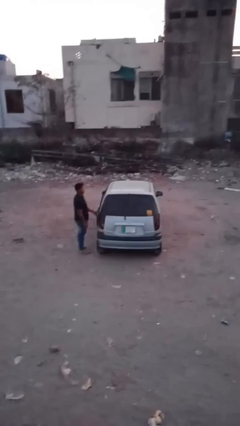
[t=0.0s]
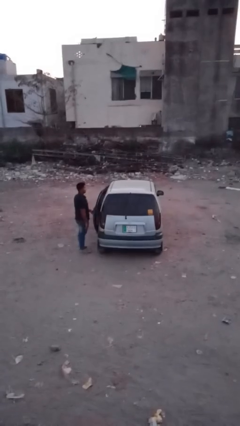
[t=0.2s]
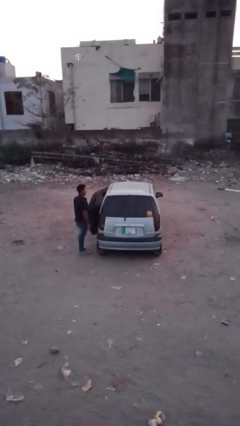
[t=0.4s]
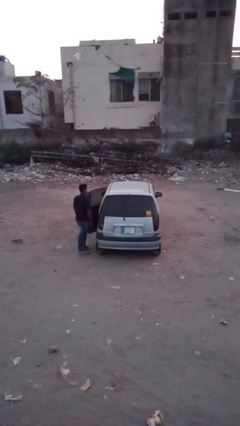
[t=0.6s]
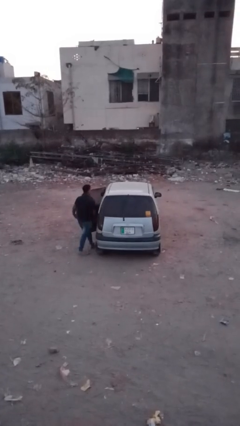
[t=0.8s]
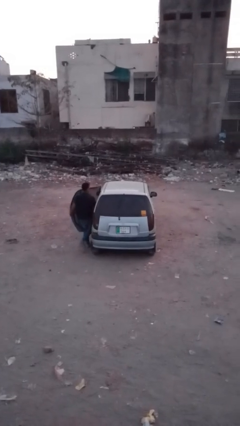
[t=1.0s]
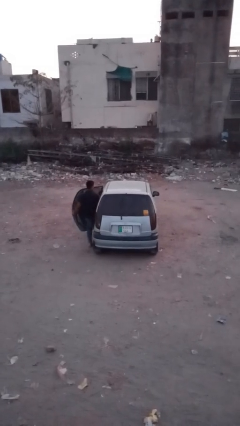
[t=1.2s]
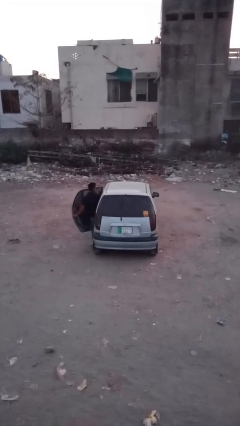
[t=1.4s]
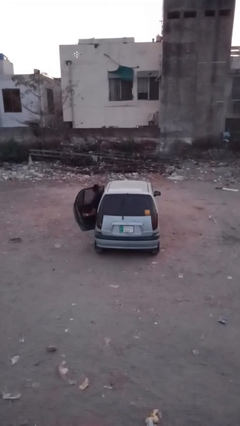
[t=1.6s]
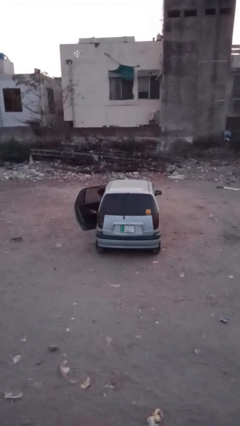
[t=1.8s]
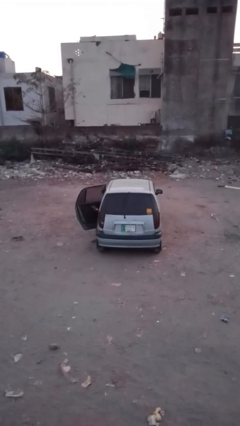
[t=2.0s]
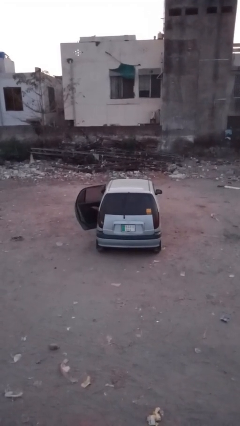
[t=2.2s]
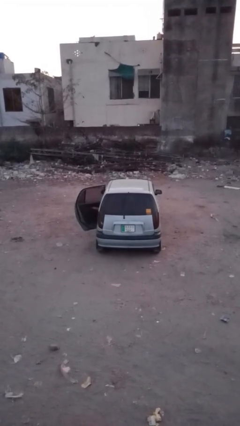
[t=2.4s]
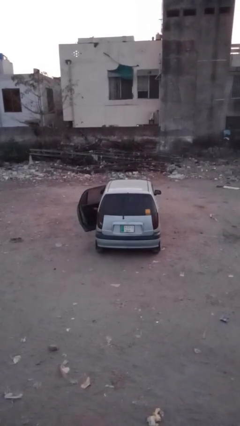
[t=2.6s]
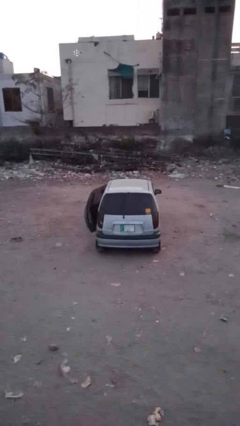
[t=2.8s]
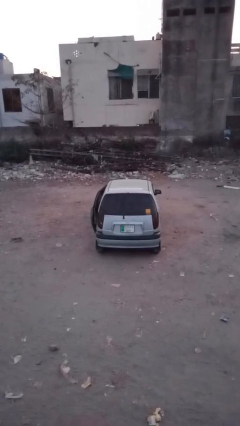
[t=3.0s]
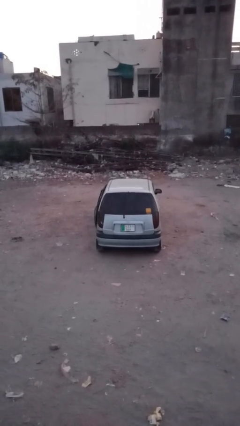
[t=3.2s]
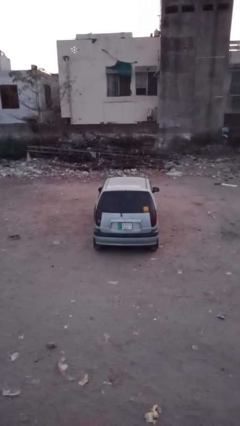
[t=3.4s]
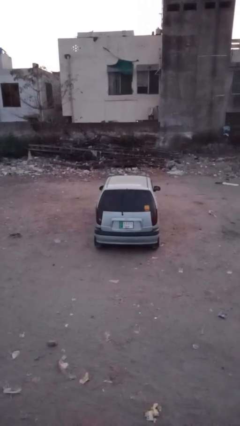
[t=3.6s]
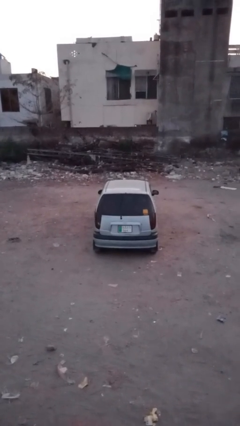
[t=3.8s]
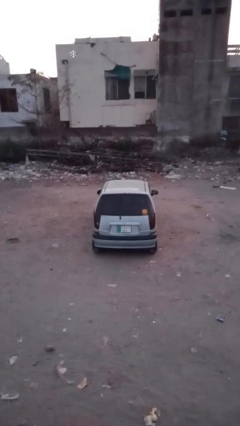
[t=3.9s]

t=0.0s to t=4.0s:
car picks up person

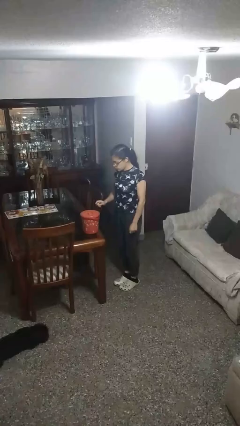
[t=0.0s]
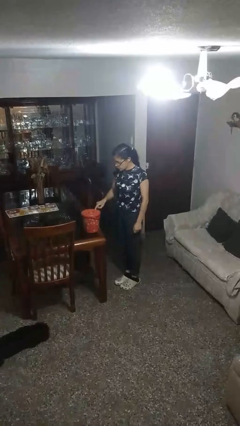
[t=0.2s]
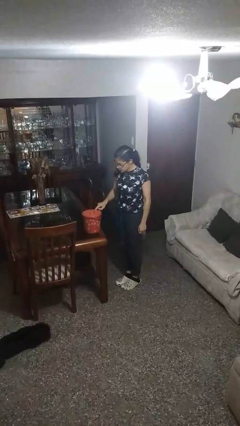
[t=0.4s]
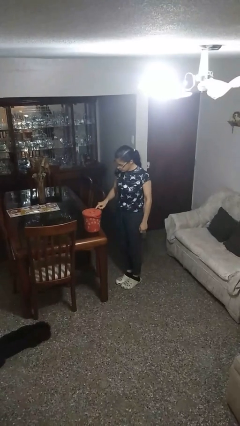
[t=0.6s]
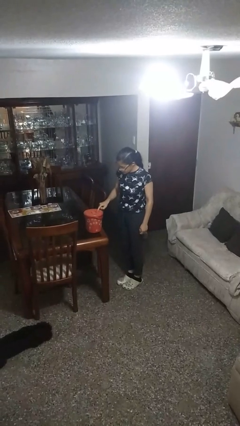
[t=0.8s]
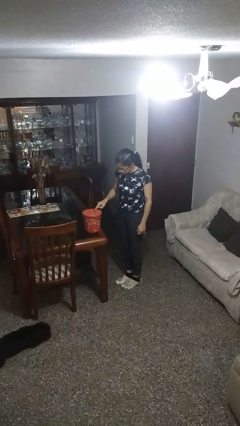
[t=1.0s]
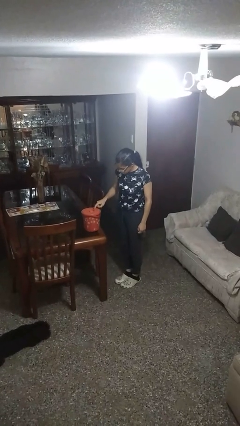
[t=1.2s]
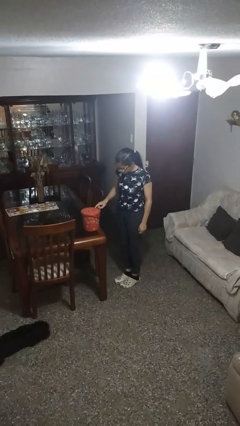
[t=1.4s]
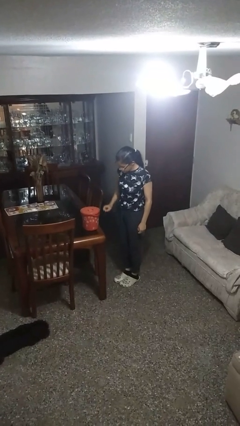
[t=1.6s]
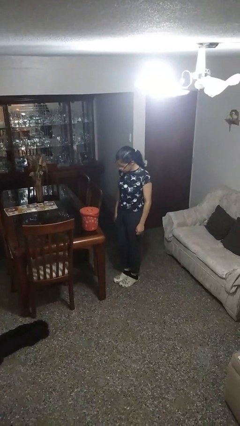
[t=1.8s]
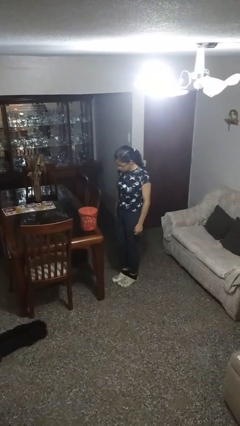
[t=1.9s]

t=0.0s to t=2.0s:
person taps object with finger

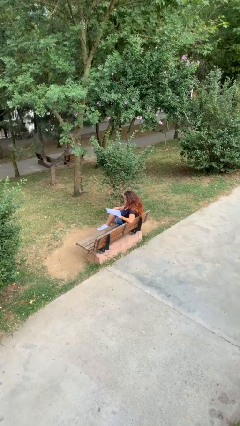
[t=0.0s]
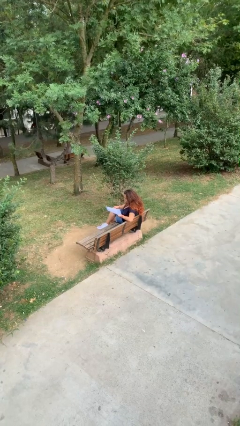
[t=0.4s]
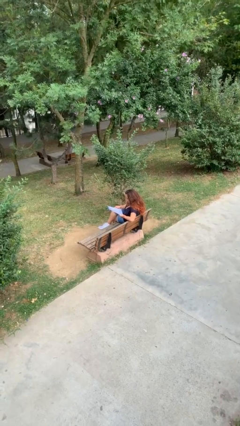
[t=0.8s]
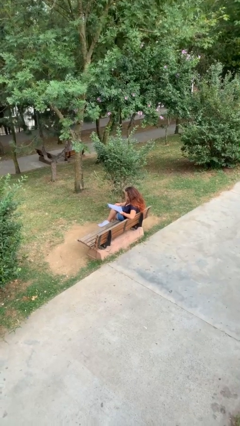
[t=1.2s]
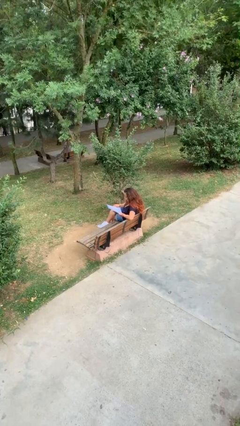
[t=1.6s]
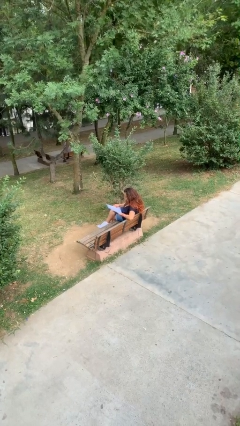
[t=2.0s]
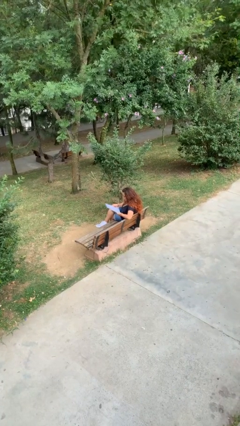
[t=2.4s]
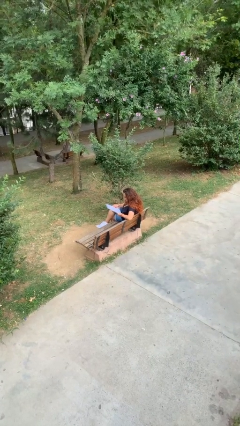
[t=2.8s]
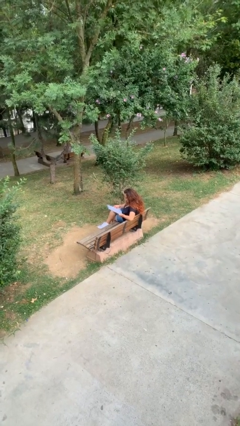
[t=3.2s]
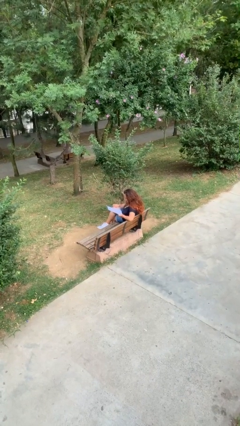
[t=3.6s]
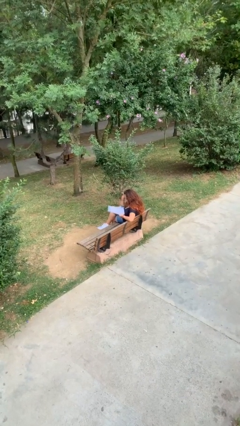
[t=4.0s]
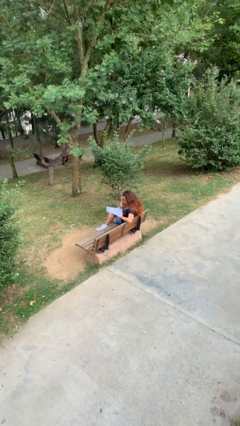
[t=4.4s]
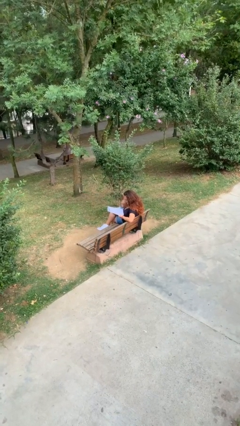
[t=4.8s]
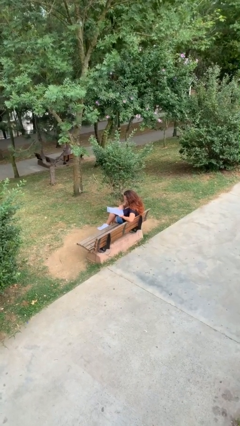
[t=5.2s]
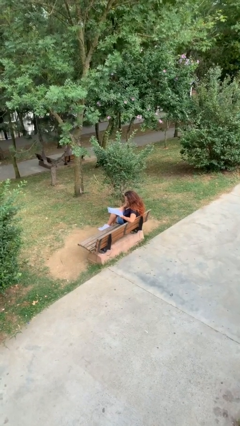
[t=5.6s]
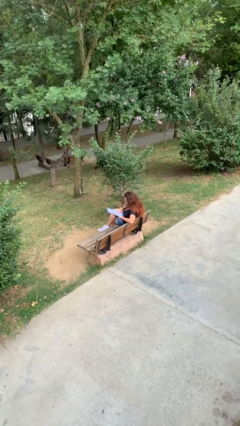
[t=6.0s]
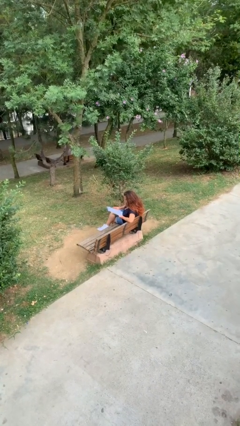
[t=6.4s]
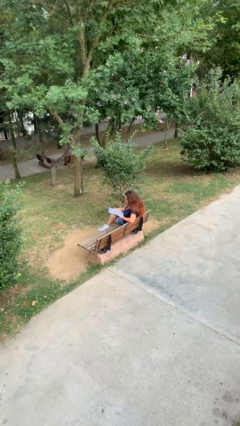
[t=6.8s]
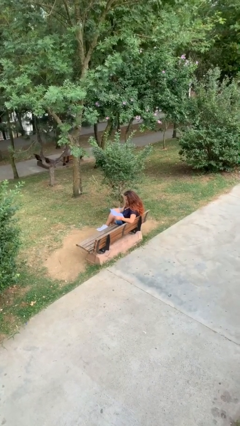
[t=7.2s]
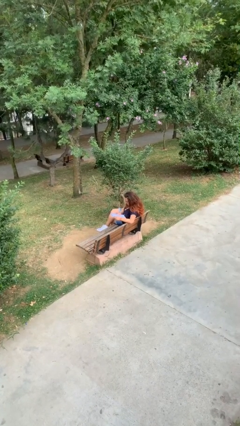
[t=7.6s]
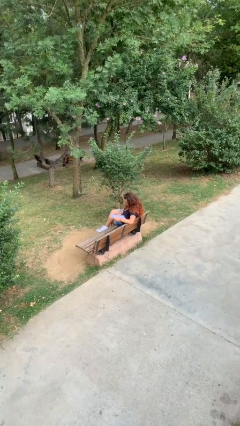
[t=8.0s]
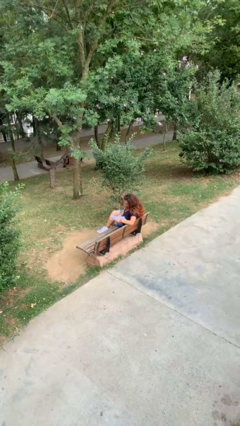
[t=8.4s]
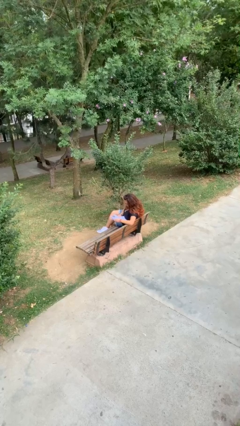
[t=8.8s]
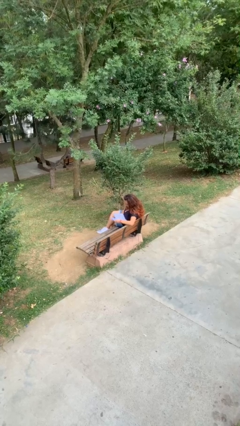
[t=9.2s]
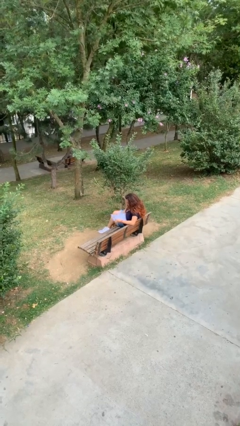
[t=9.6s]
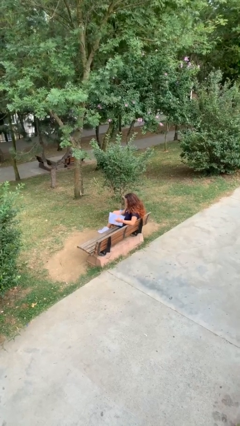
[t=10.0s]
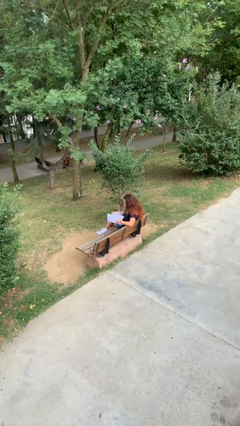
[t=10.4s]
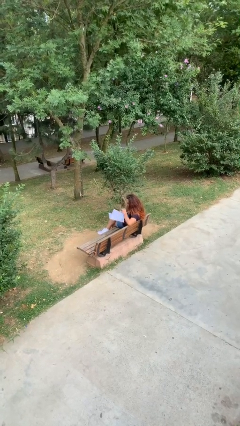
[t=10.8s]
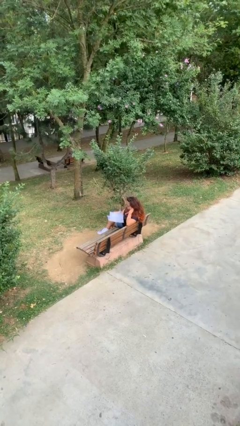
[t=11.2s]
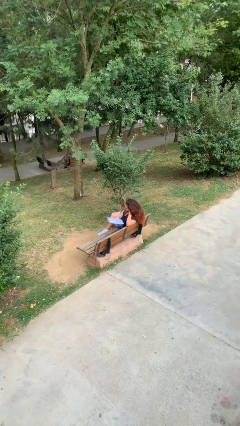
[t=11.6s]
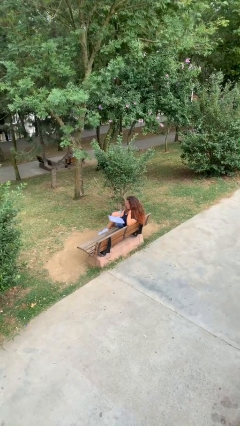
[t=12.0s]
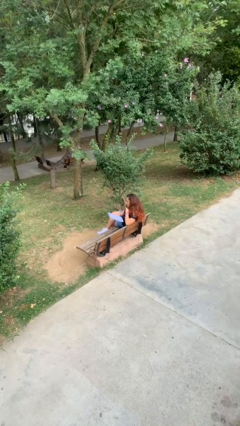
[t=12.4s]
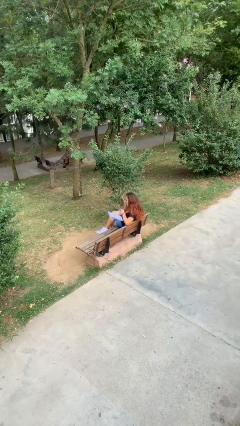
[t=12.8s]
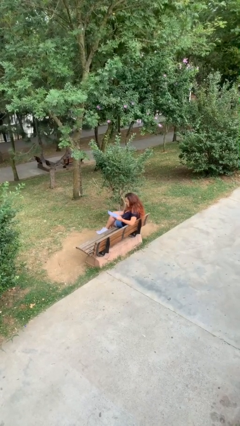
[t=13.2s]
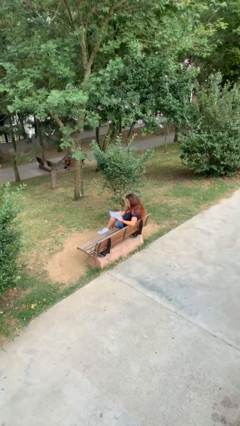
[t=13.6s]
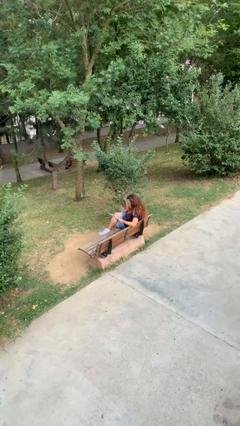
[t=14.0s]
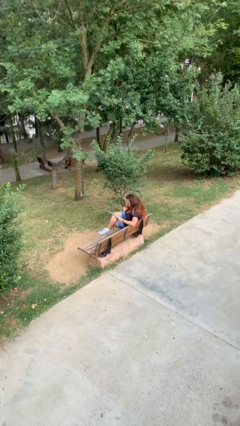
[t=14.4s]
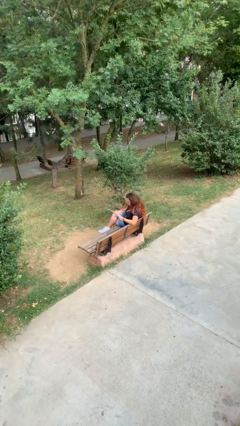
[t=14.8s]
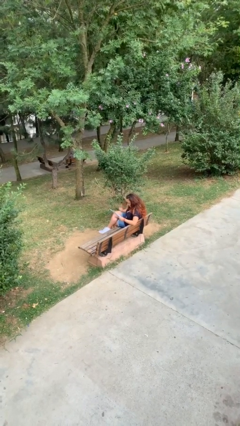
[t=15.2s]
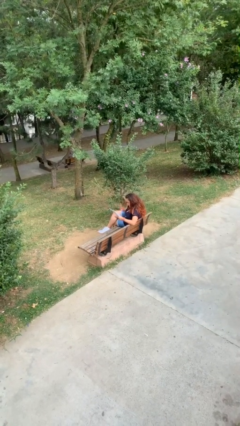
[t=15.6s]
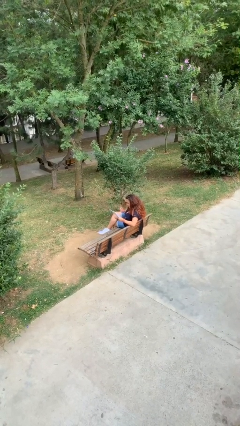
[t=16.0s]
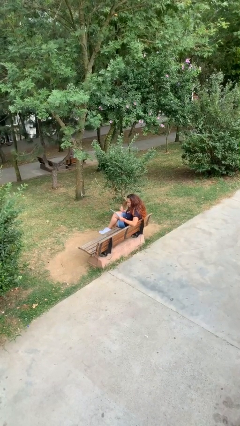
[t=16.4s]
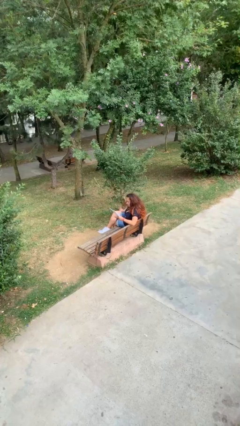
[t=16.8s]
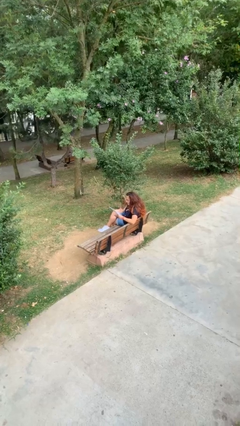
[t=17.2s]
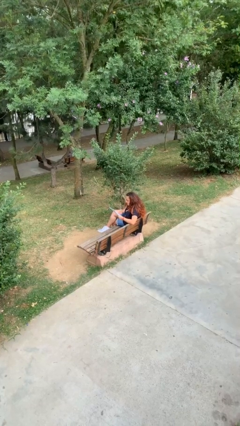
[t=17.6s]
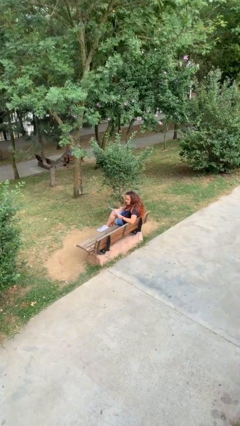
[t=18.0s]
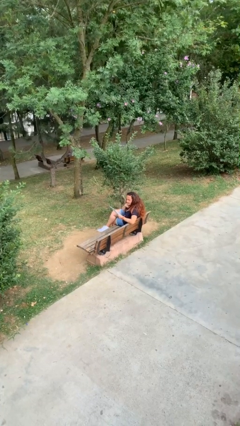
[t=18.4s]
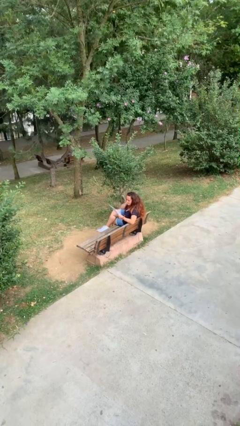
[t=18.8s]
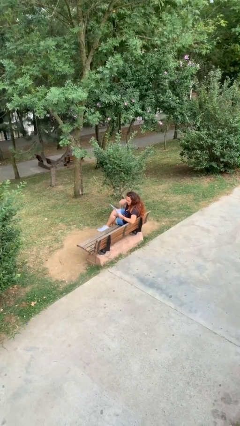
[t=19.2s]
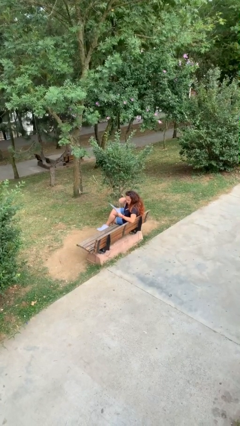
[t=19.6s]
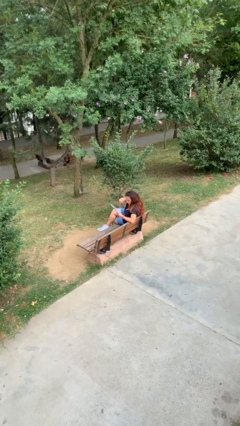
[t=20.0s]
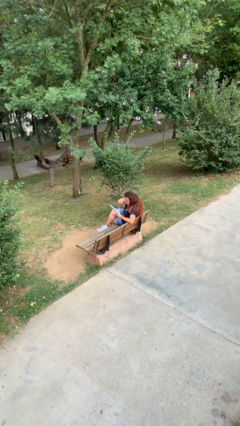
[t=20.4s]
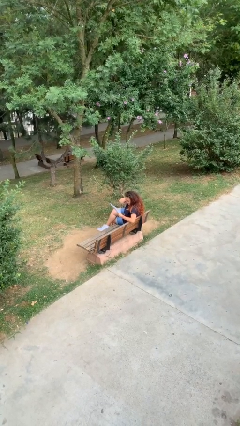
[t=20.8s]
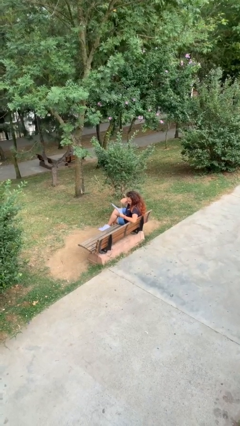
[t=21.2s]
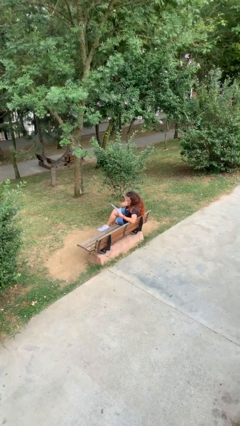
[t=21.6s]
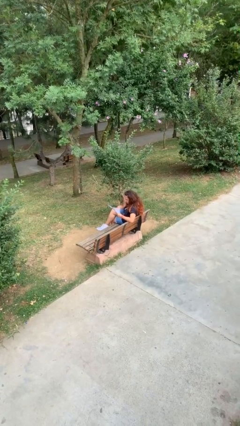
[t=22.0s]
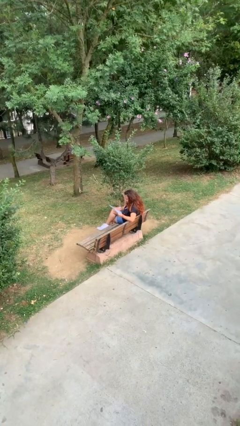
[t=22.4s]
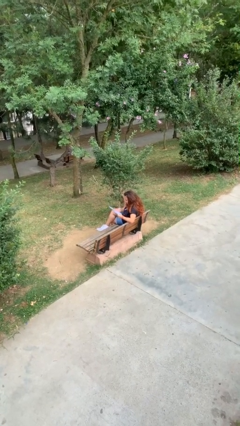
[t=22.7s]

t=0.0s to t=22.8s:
person reads document

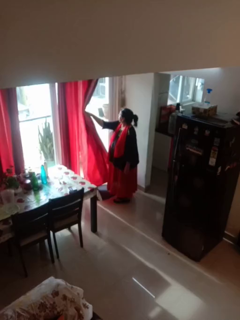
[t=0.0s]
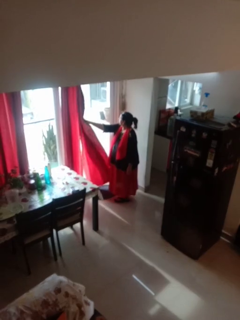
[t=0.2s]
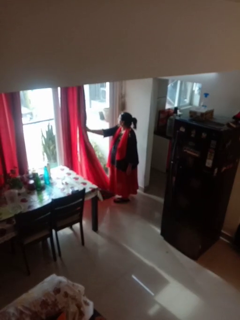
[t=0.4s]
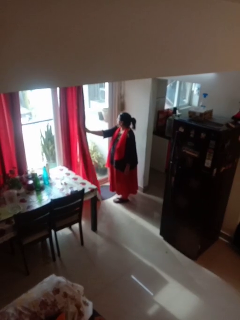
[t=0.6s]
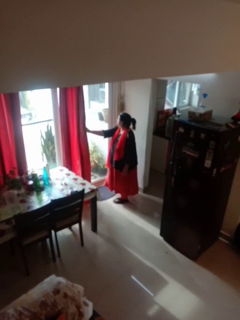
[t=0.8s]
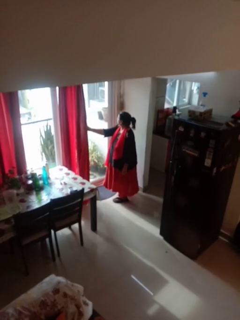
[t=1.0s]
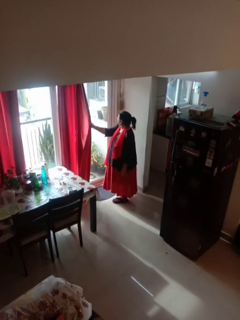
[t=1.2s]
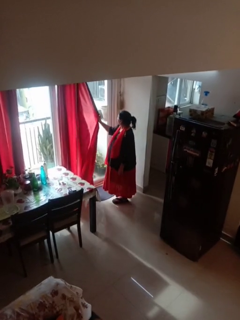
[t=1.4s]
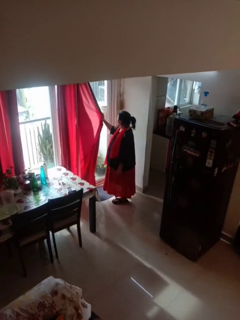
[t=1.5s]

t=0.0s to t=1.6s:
person opens curtains
